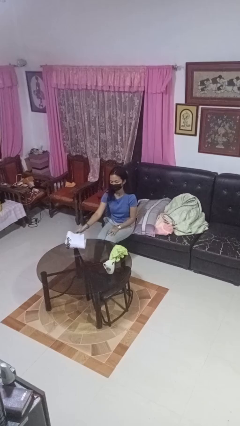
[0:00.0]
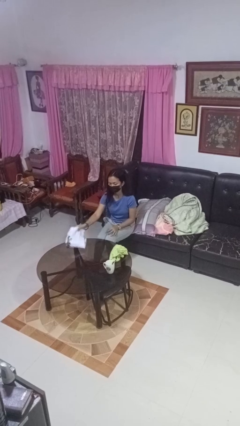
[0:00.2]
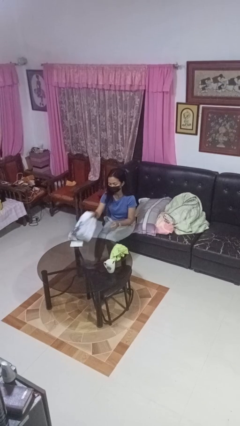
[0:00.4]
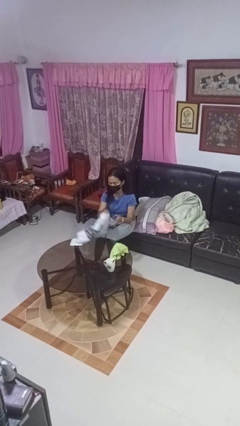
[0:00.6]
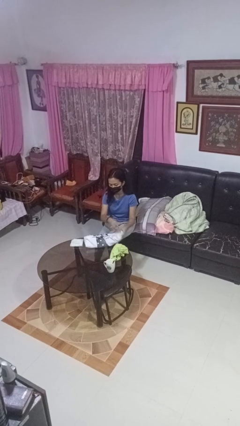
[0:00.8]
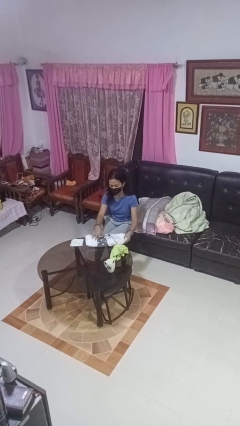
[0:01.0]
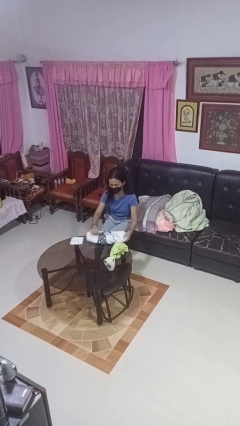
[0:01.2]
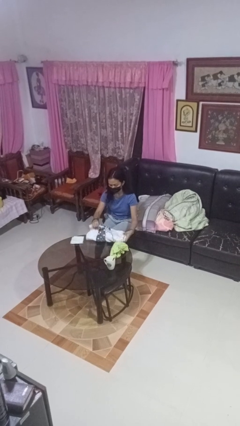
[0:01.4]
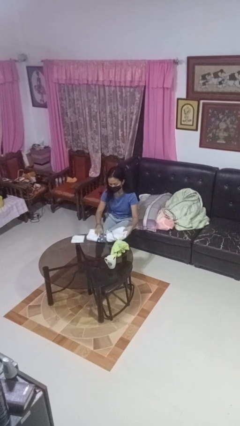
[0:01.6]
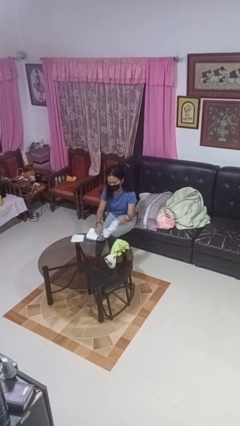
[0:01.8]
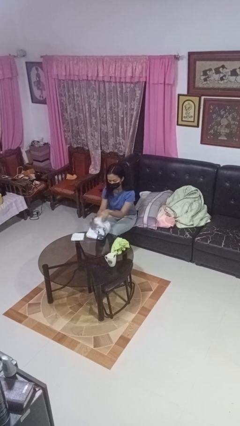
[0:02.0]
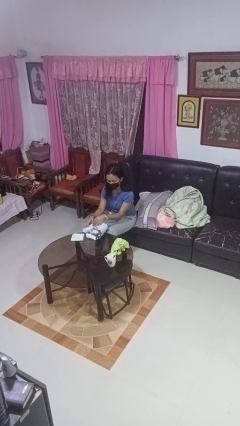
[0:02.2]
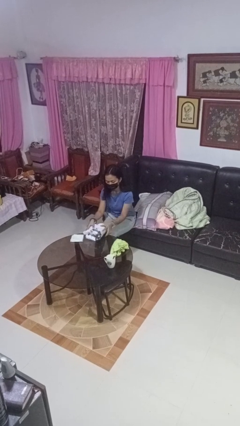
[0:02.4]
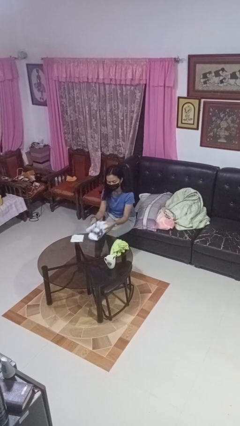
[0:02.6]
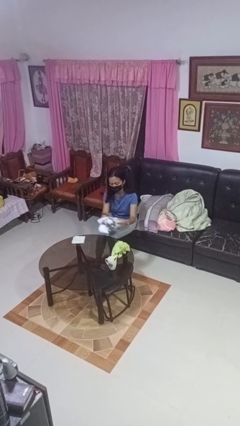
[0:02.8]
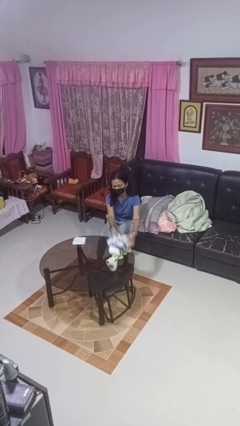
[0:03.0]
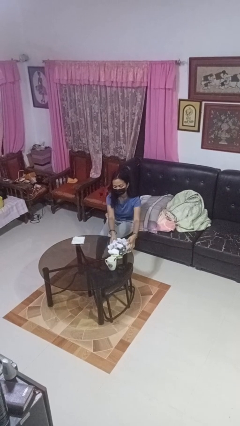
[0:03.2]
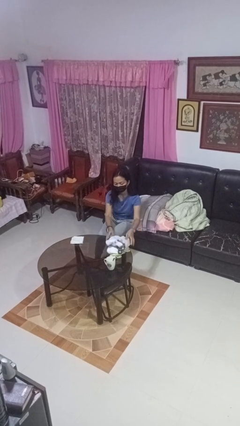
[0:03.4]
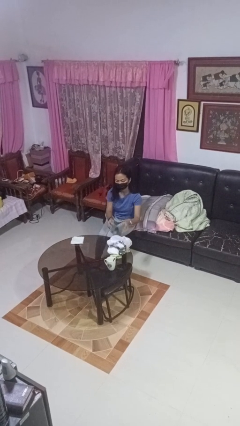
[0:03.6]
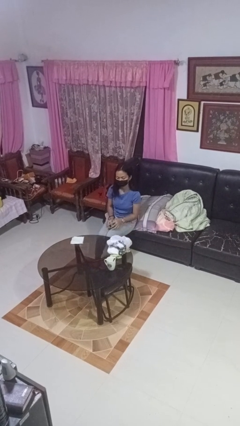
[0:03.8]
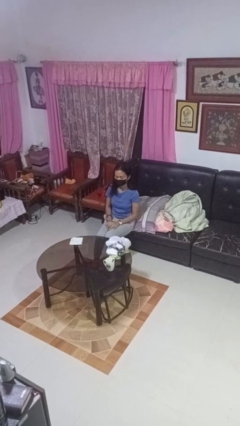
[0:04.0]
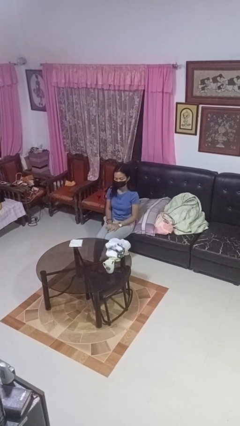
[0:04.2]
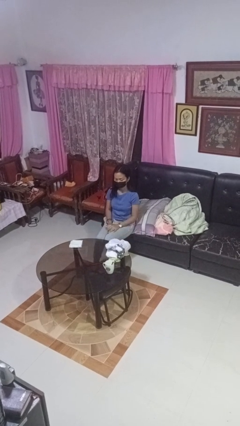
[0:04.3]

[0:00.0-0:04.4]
person folds towel

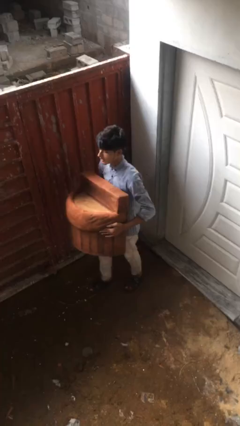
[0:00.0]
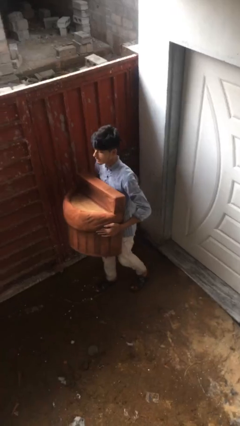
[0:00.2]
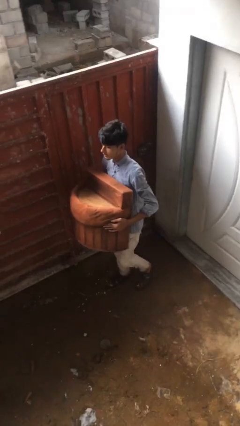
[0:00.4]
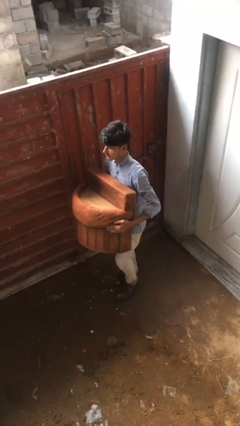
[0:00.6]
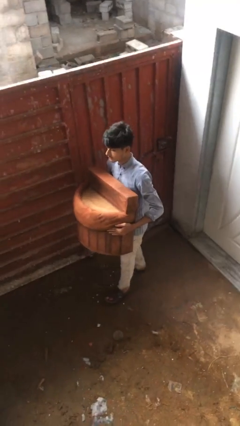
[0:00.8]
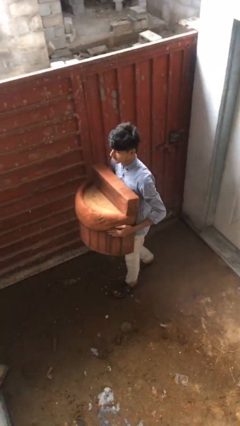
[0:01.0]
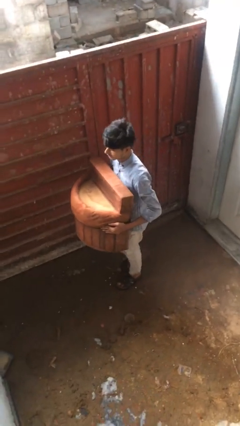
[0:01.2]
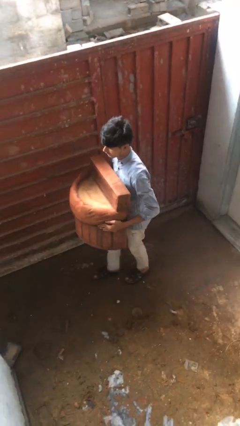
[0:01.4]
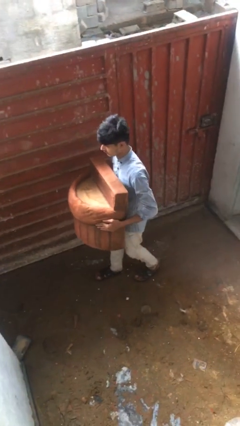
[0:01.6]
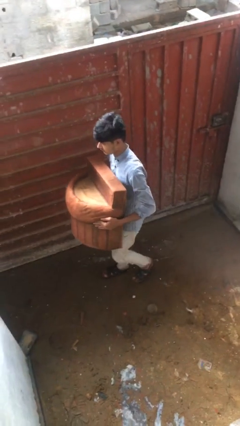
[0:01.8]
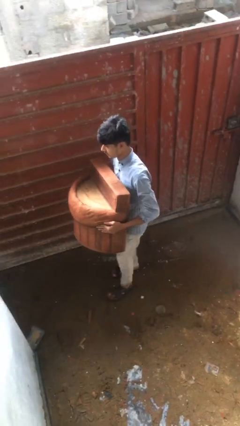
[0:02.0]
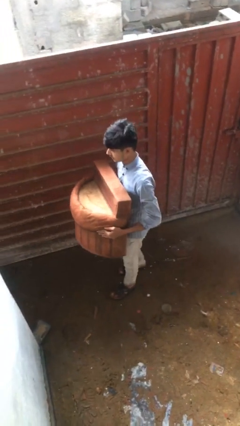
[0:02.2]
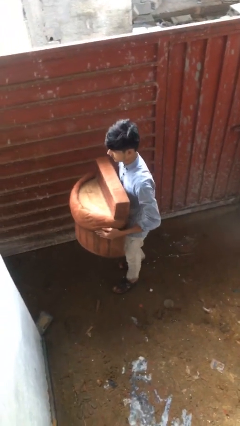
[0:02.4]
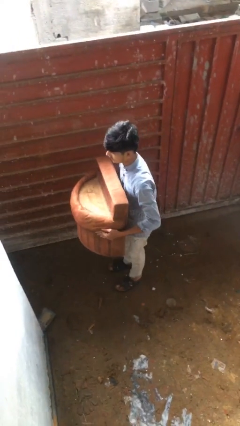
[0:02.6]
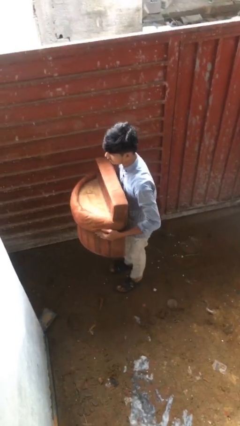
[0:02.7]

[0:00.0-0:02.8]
person carries heavy object

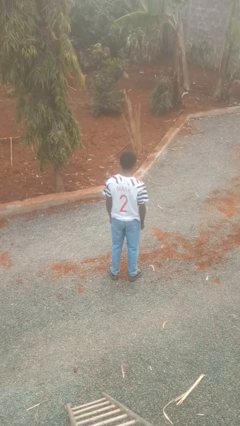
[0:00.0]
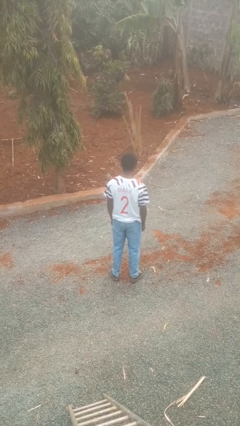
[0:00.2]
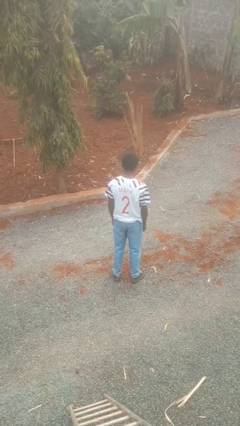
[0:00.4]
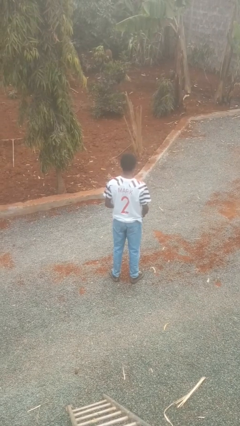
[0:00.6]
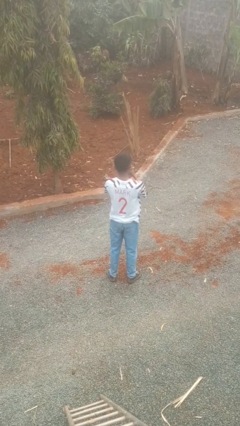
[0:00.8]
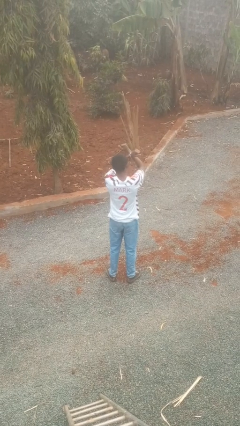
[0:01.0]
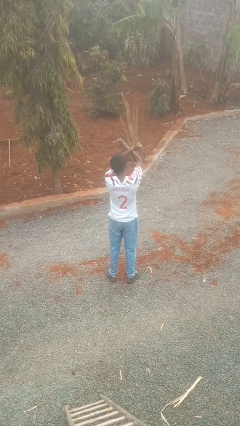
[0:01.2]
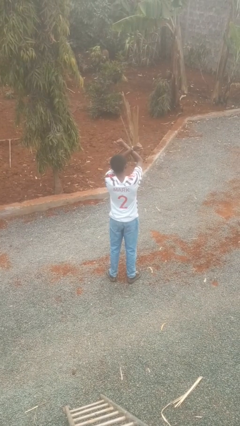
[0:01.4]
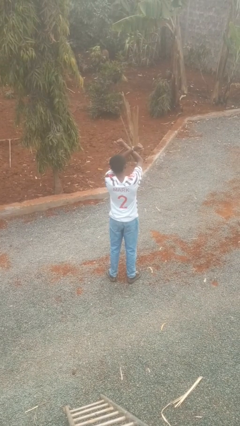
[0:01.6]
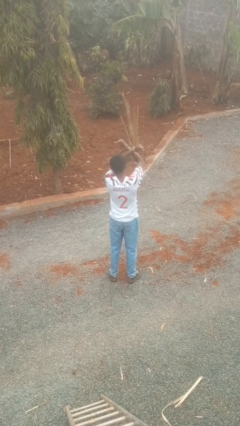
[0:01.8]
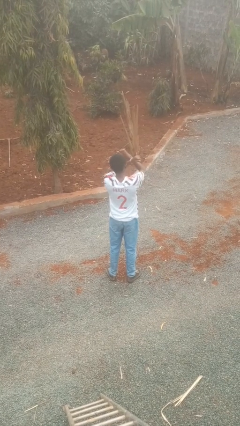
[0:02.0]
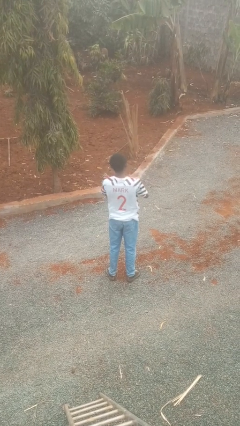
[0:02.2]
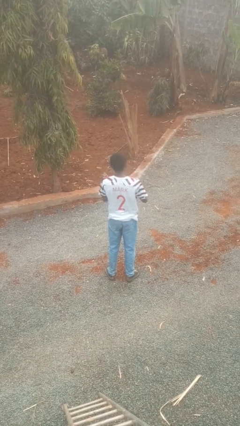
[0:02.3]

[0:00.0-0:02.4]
person gestures arms x

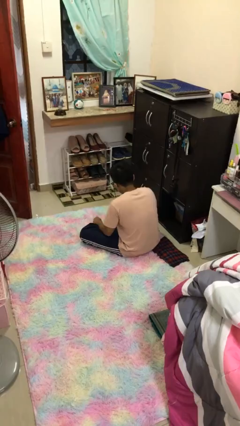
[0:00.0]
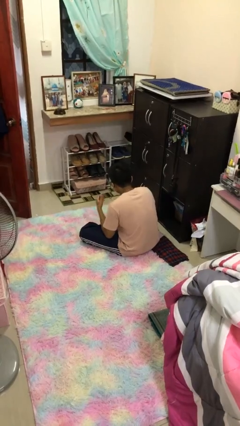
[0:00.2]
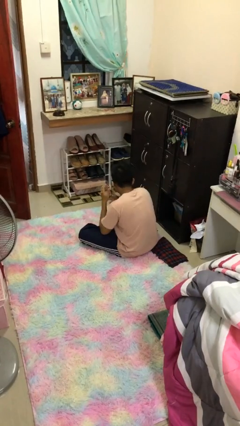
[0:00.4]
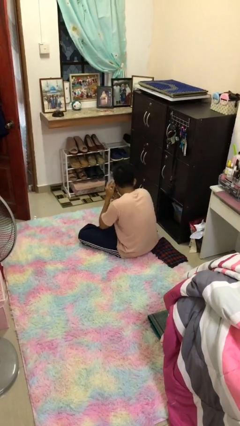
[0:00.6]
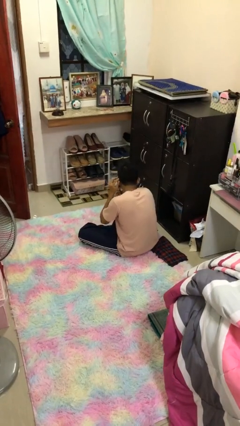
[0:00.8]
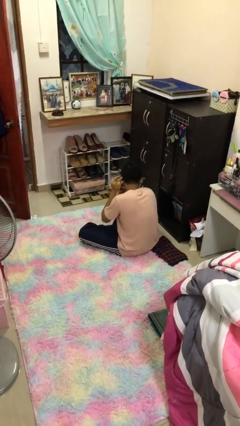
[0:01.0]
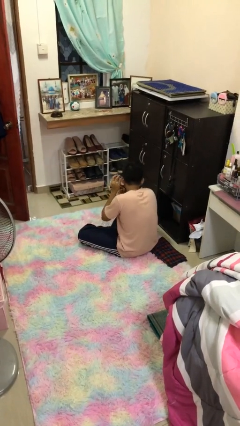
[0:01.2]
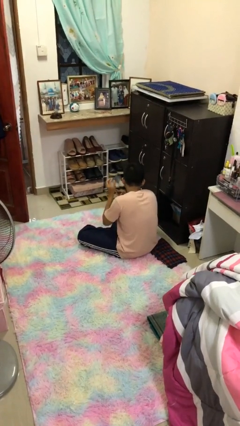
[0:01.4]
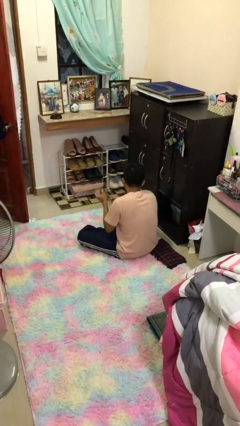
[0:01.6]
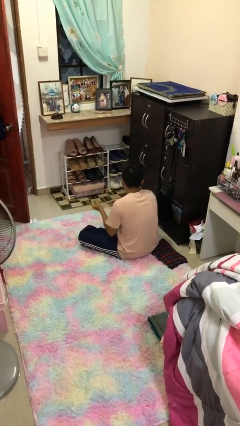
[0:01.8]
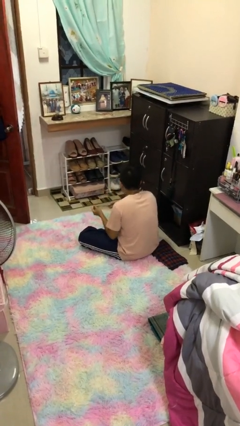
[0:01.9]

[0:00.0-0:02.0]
person takes off earrings

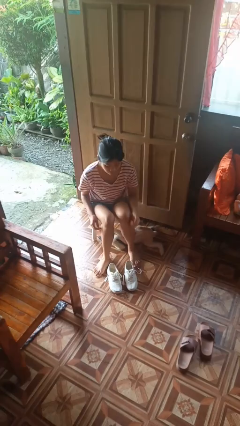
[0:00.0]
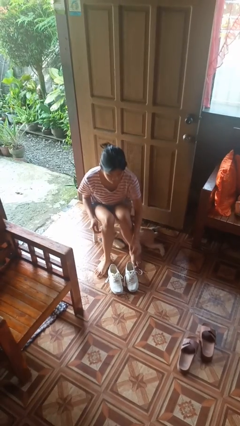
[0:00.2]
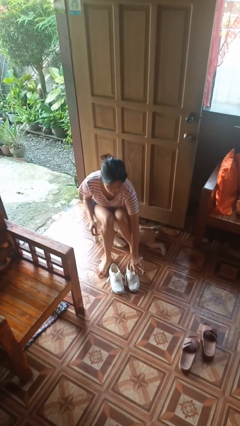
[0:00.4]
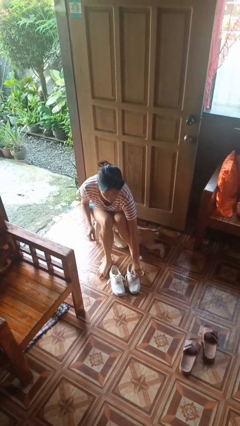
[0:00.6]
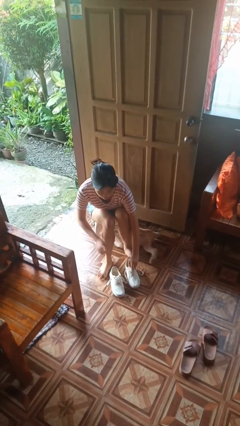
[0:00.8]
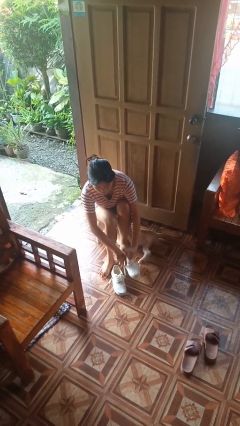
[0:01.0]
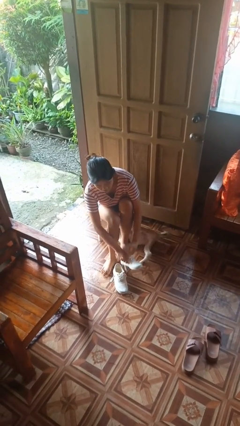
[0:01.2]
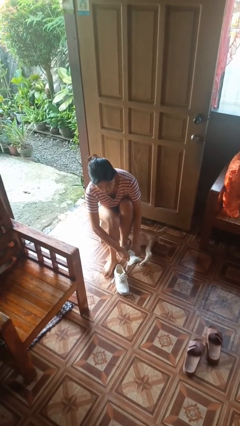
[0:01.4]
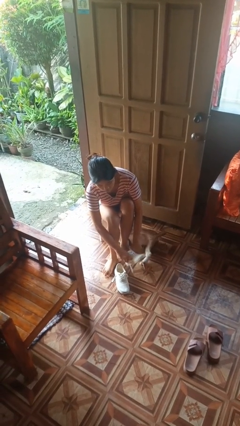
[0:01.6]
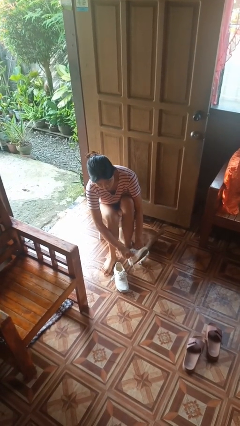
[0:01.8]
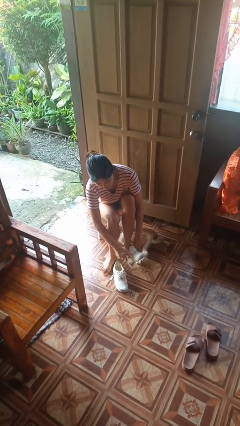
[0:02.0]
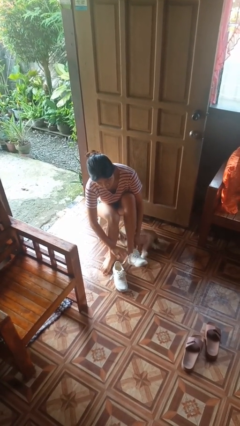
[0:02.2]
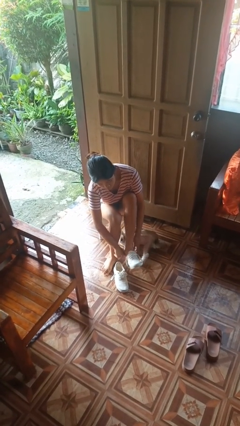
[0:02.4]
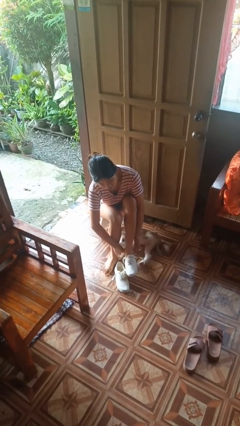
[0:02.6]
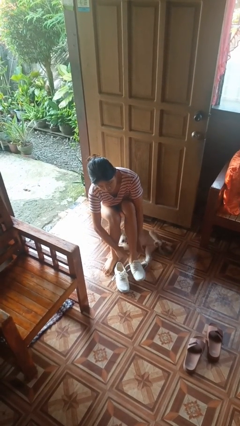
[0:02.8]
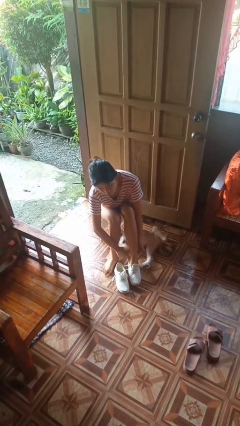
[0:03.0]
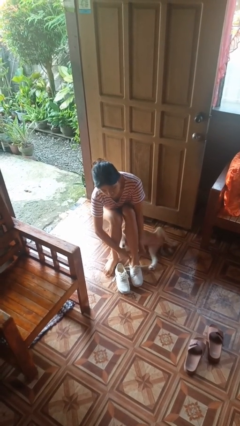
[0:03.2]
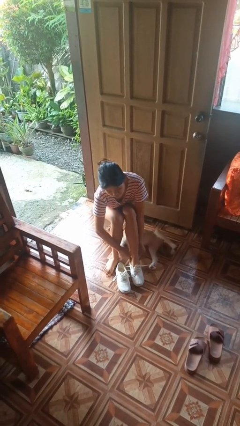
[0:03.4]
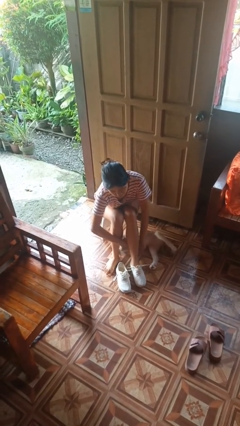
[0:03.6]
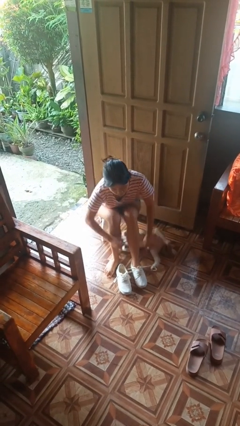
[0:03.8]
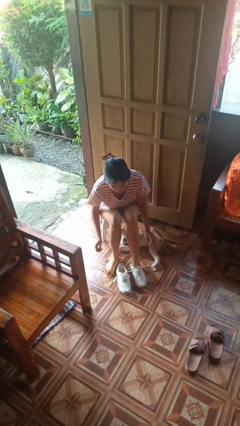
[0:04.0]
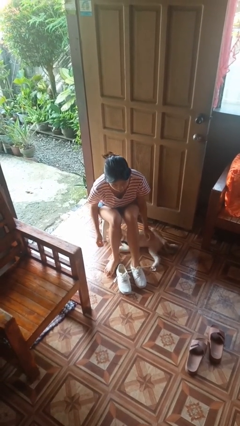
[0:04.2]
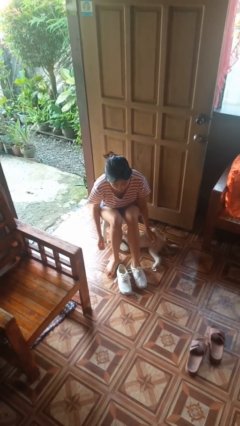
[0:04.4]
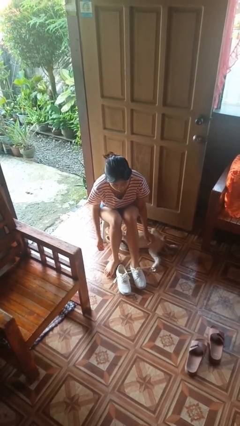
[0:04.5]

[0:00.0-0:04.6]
person puts on shoes

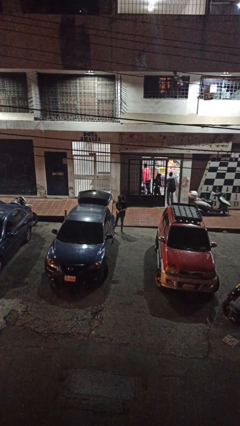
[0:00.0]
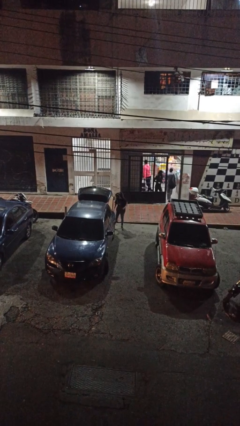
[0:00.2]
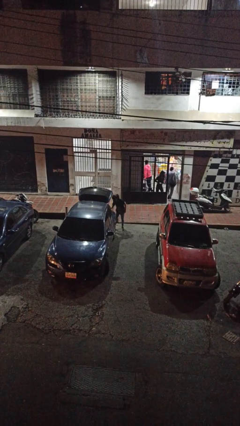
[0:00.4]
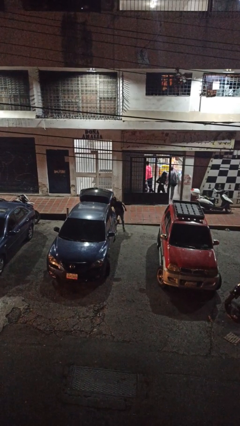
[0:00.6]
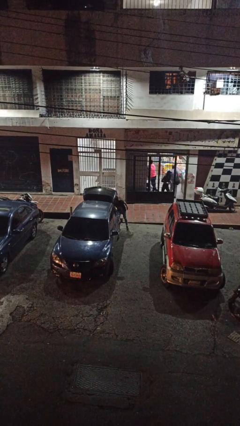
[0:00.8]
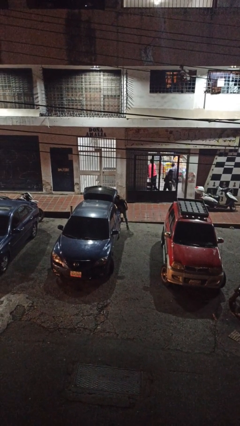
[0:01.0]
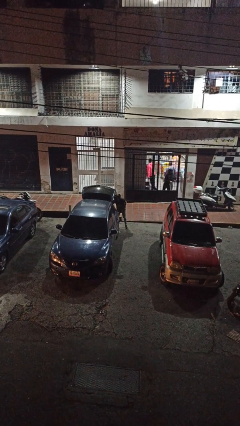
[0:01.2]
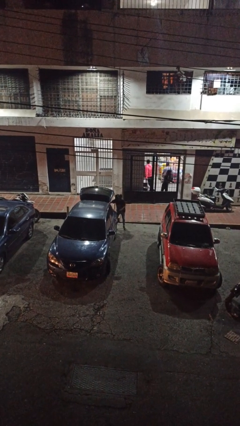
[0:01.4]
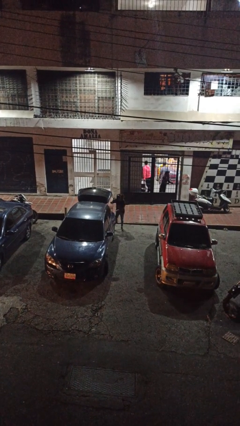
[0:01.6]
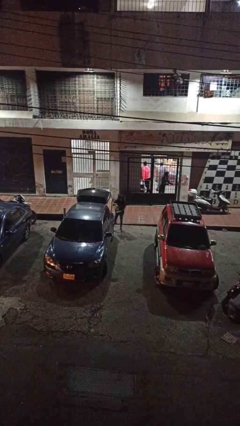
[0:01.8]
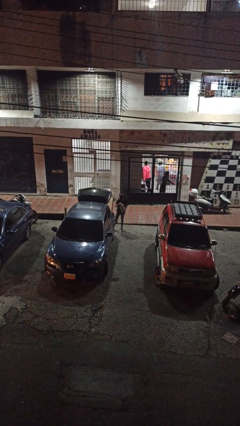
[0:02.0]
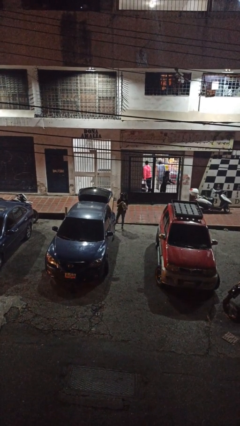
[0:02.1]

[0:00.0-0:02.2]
person unloads car
